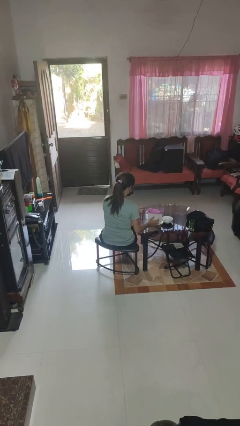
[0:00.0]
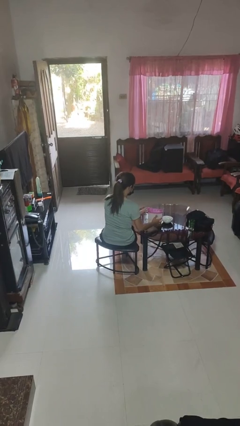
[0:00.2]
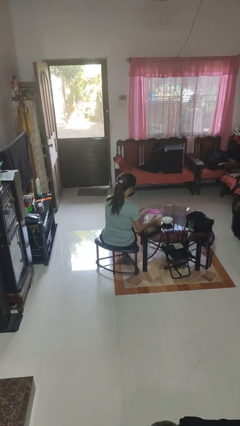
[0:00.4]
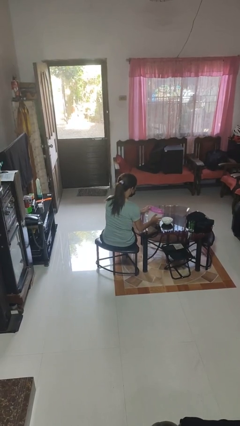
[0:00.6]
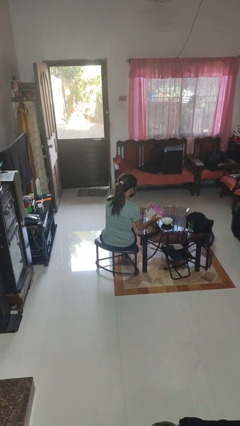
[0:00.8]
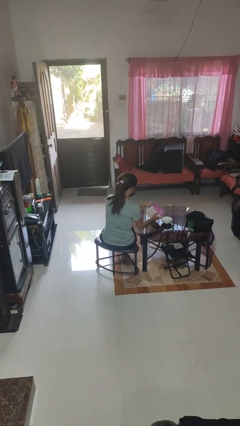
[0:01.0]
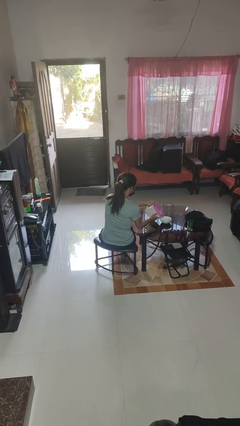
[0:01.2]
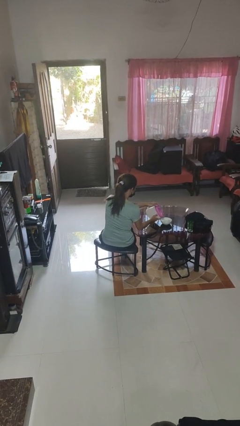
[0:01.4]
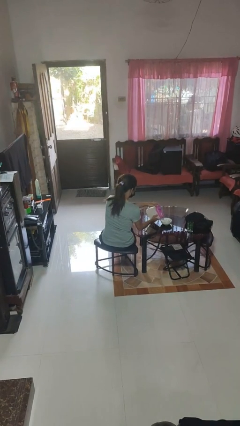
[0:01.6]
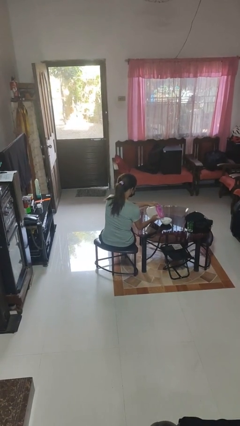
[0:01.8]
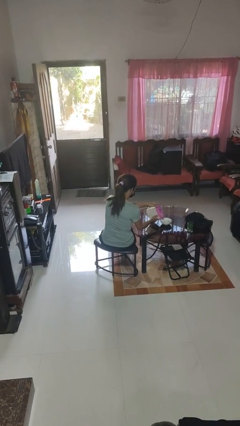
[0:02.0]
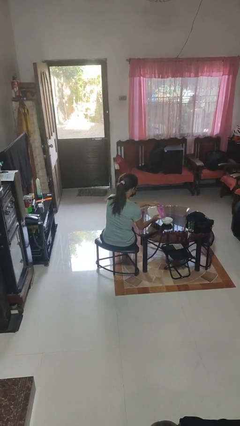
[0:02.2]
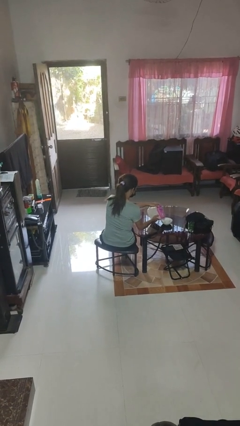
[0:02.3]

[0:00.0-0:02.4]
person pours into bowl

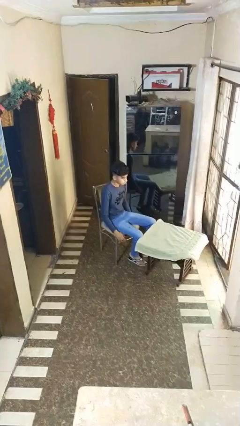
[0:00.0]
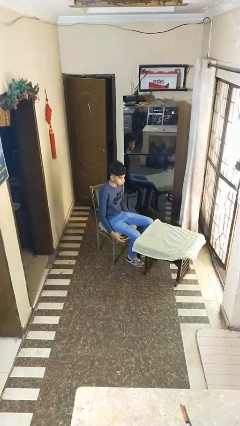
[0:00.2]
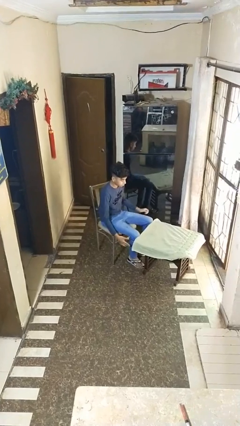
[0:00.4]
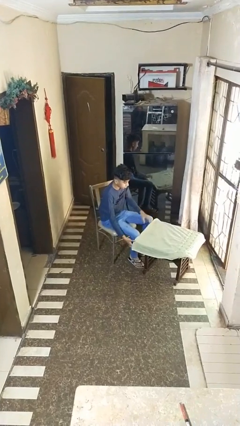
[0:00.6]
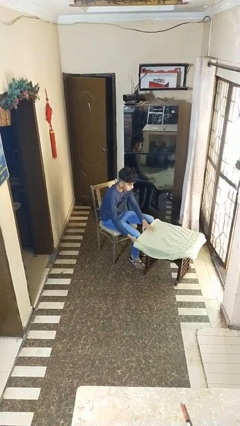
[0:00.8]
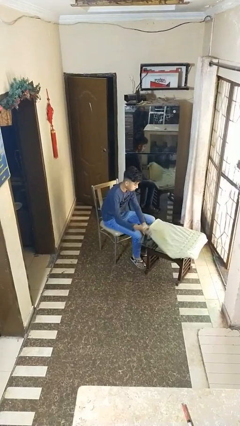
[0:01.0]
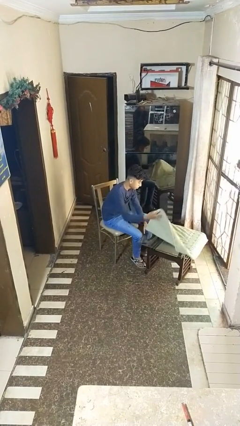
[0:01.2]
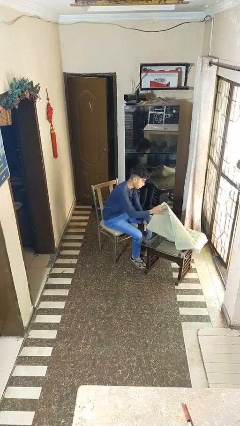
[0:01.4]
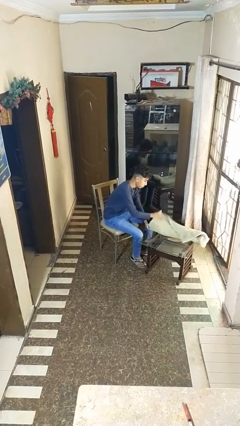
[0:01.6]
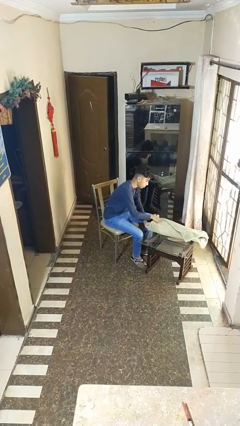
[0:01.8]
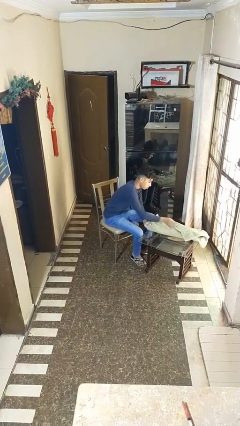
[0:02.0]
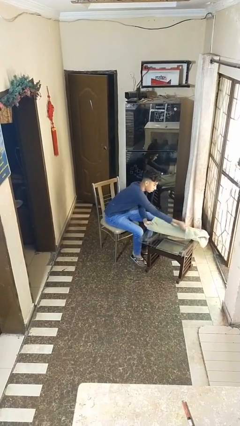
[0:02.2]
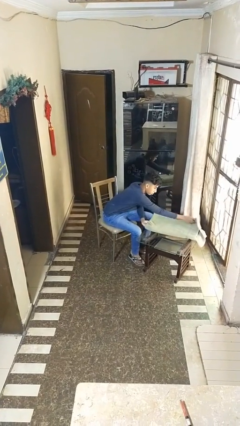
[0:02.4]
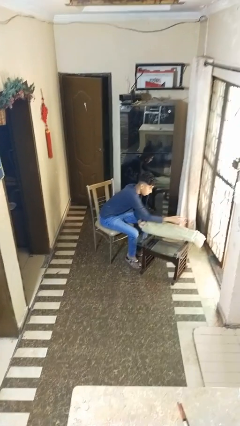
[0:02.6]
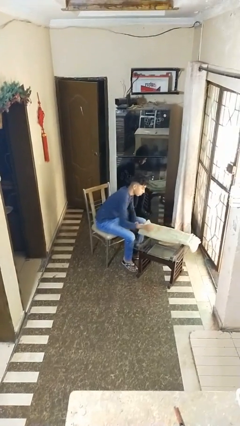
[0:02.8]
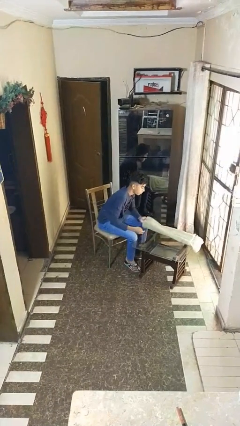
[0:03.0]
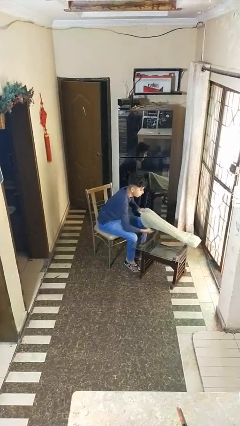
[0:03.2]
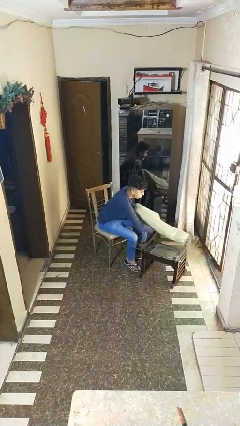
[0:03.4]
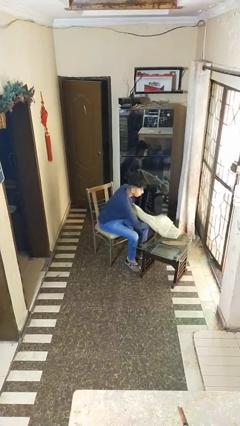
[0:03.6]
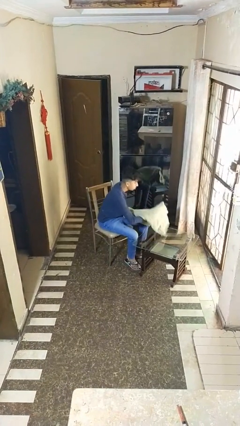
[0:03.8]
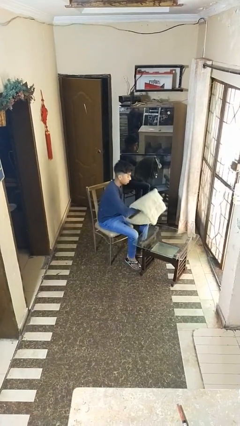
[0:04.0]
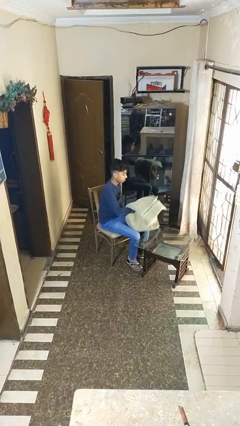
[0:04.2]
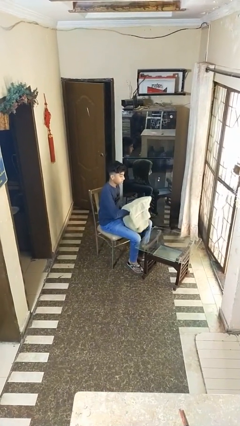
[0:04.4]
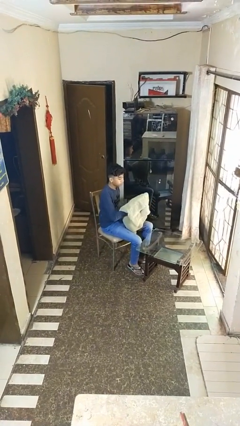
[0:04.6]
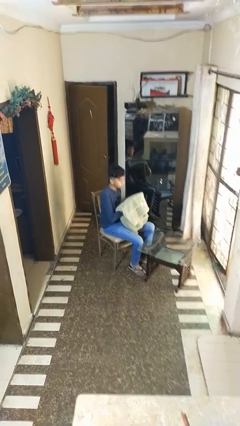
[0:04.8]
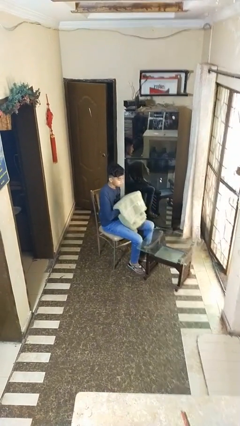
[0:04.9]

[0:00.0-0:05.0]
person folds tablecloth

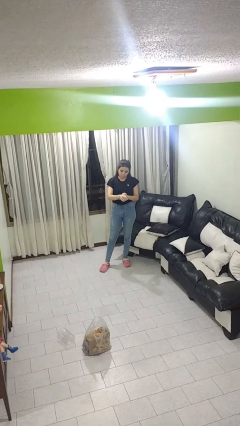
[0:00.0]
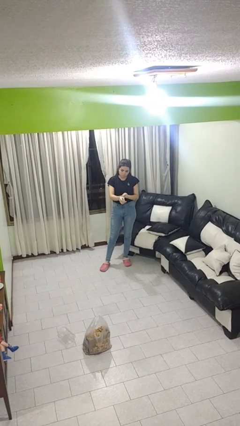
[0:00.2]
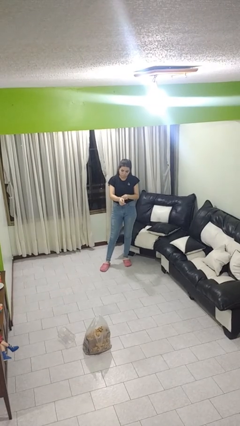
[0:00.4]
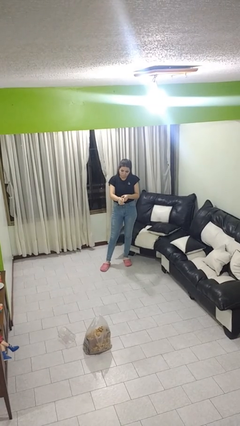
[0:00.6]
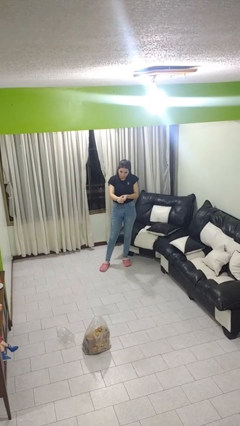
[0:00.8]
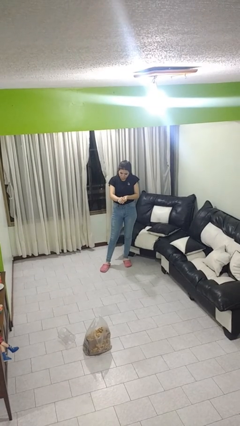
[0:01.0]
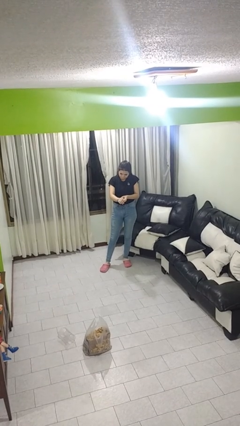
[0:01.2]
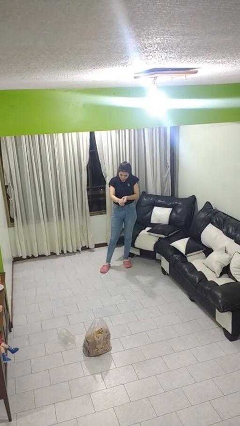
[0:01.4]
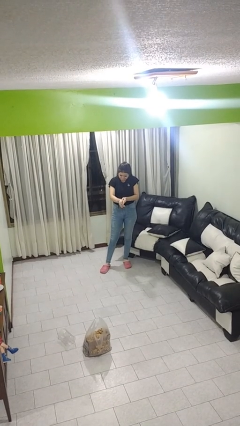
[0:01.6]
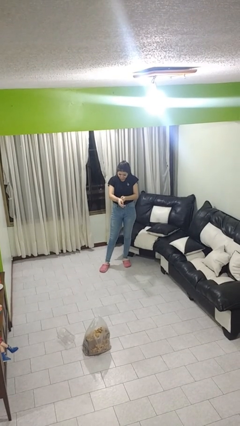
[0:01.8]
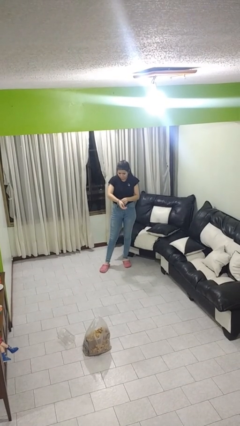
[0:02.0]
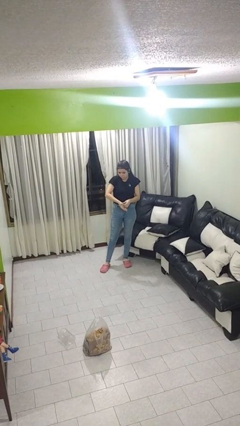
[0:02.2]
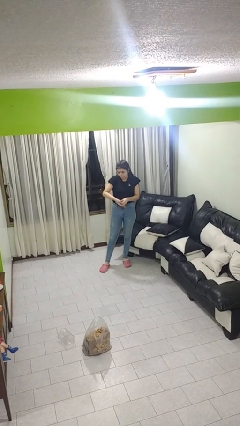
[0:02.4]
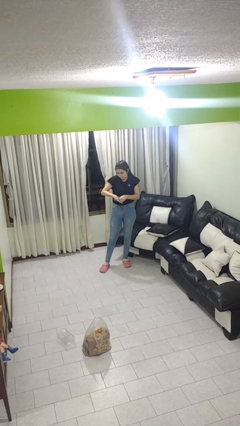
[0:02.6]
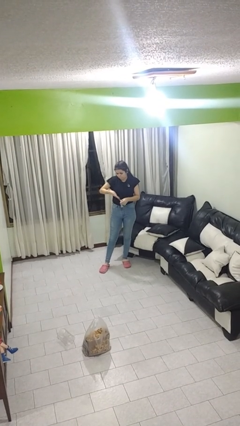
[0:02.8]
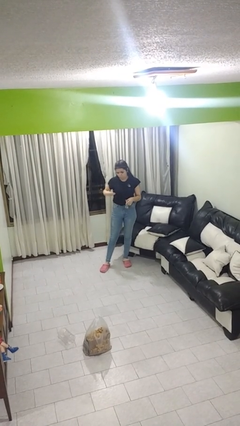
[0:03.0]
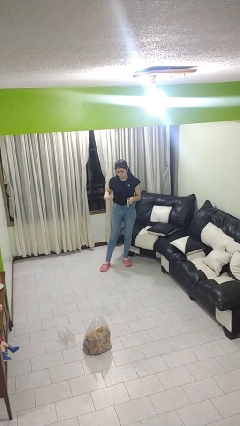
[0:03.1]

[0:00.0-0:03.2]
person takes off wristwatch

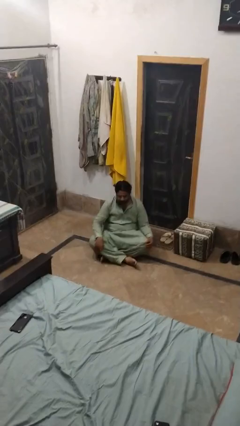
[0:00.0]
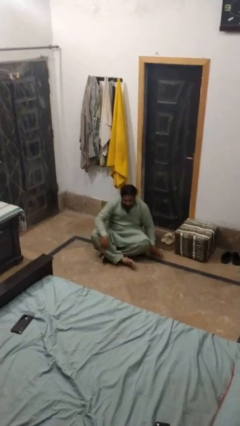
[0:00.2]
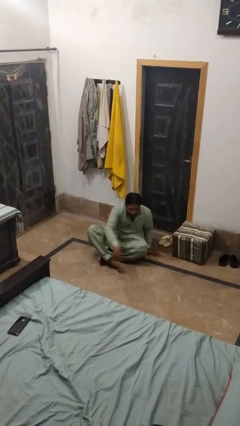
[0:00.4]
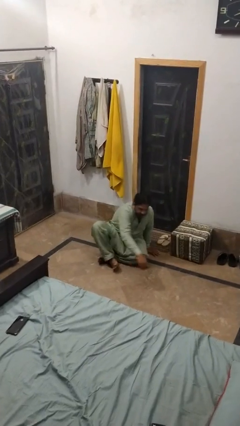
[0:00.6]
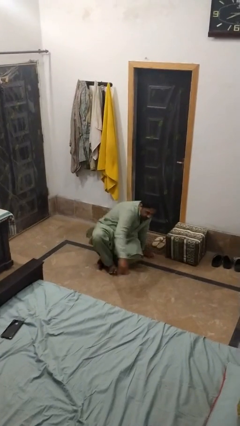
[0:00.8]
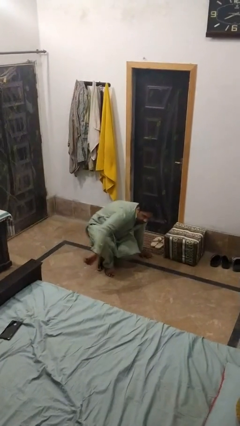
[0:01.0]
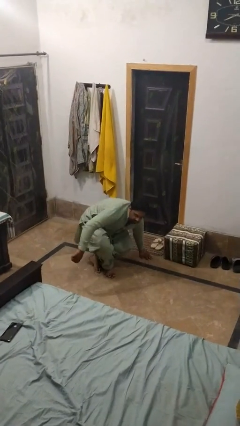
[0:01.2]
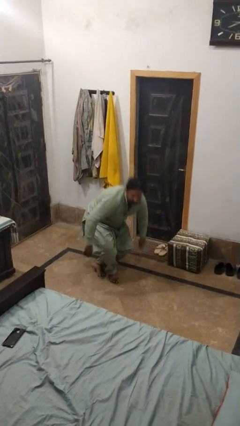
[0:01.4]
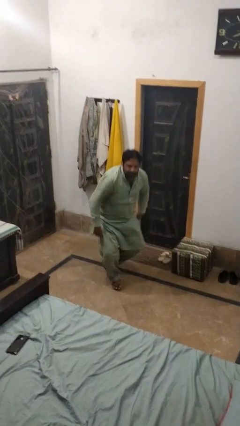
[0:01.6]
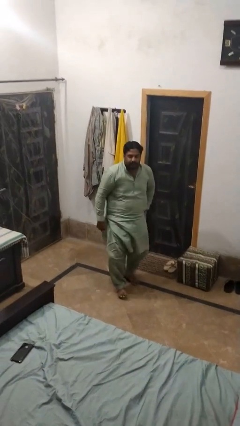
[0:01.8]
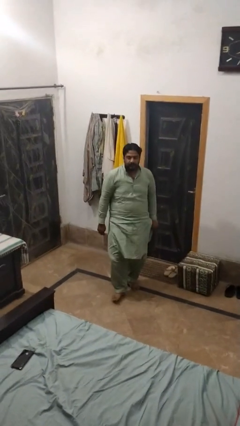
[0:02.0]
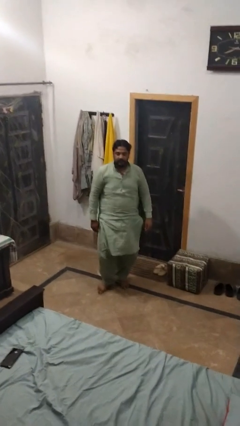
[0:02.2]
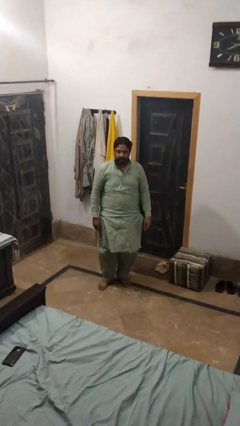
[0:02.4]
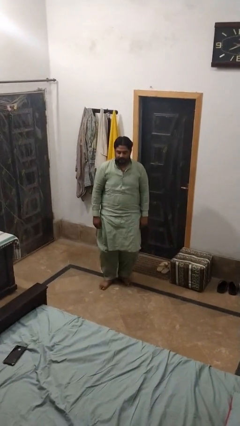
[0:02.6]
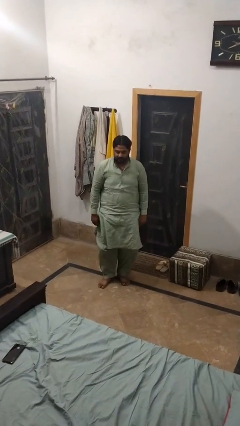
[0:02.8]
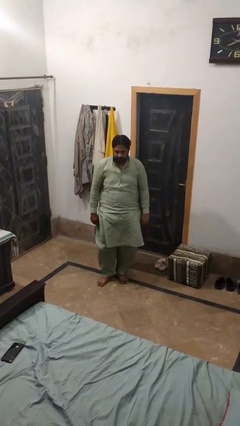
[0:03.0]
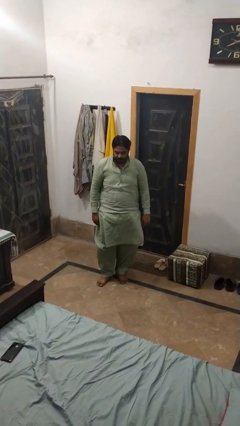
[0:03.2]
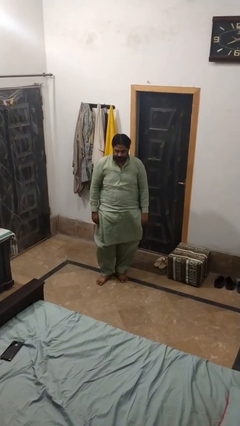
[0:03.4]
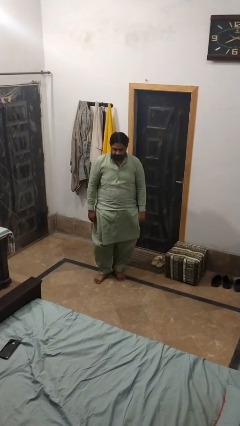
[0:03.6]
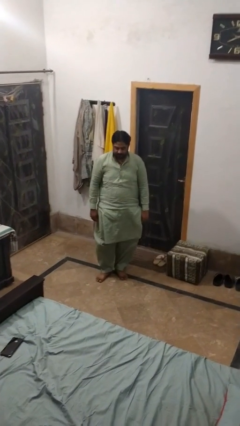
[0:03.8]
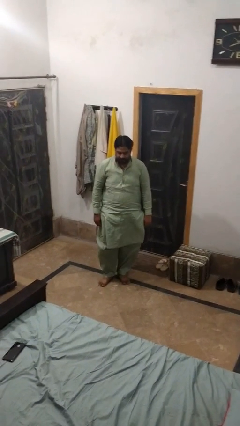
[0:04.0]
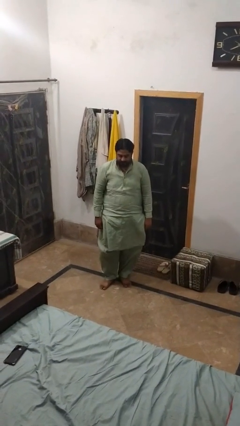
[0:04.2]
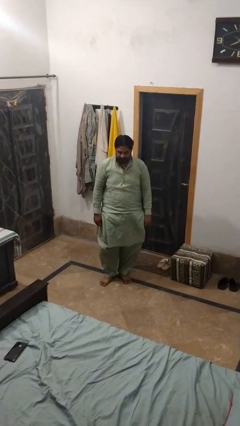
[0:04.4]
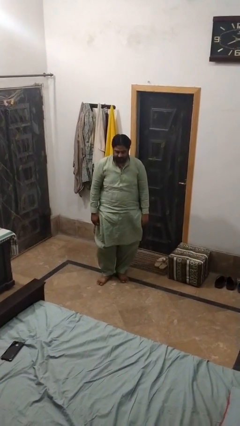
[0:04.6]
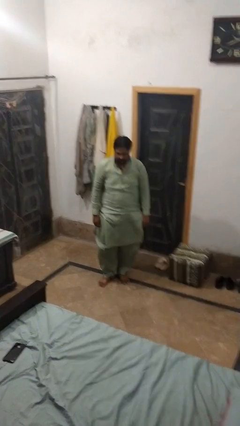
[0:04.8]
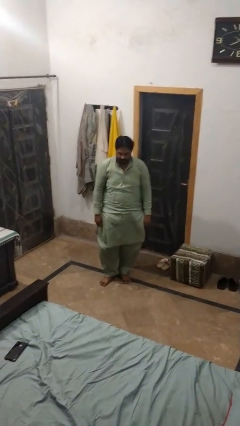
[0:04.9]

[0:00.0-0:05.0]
person stands up from floor

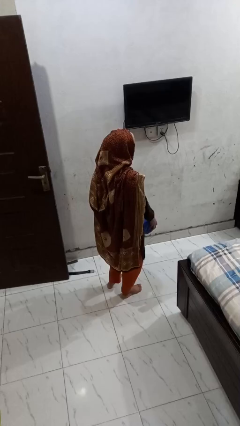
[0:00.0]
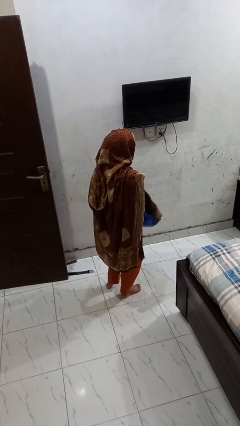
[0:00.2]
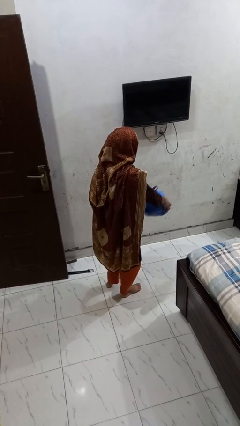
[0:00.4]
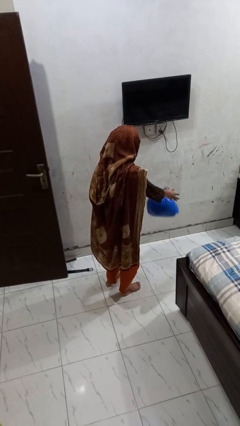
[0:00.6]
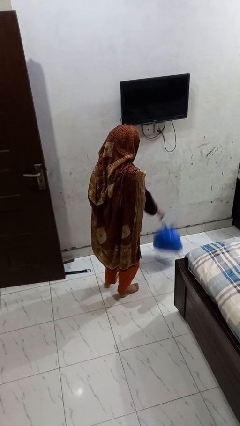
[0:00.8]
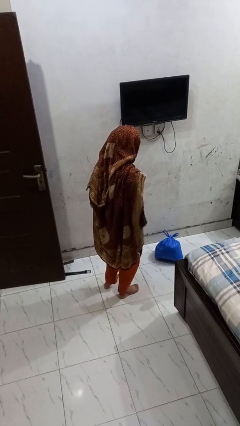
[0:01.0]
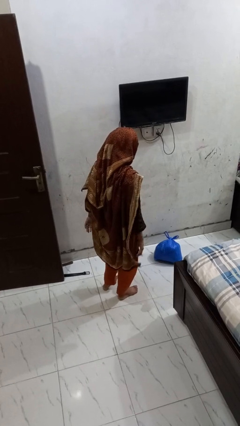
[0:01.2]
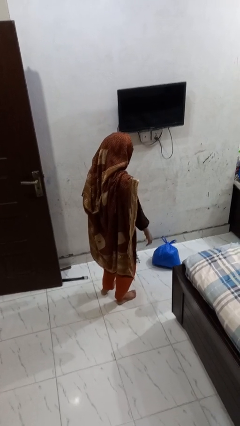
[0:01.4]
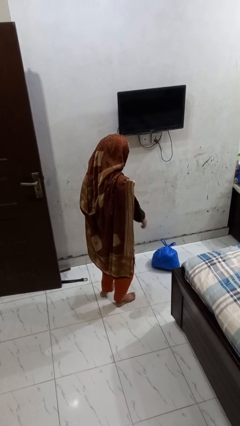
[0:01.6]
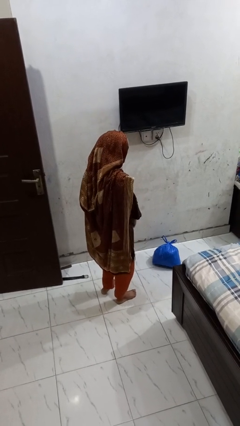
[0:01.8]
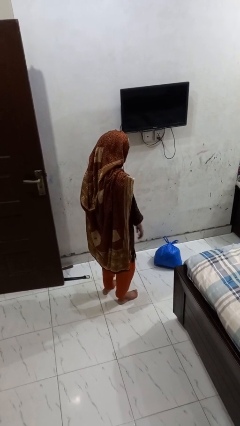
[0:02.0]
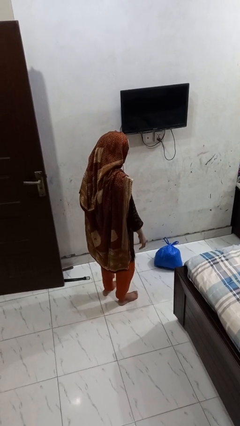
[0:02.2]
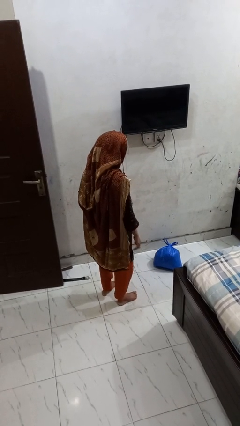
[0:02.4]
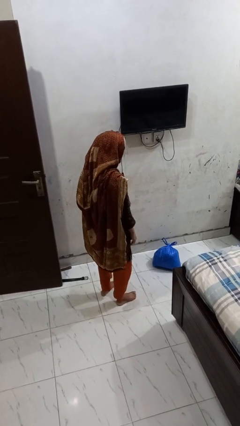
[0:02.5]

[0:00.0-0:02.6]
person throws object to ground
